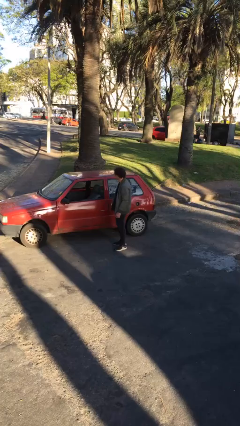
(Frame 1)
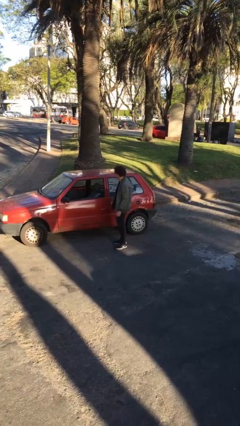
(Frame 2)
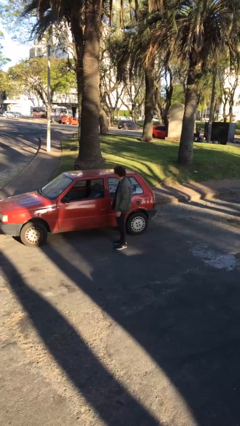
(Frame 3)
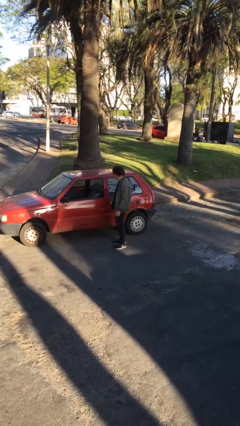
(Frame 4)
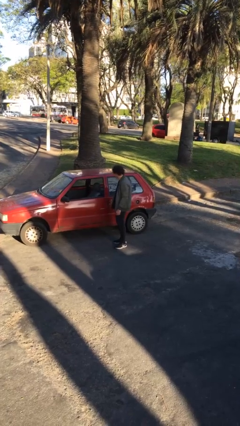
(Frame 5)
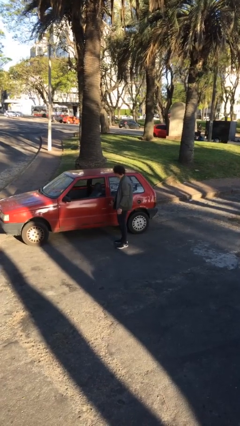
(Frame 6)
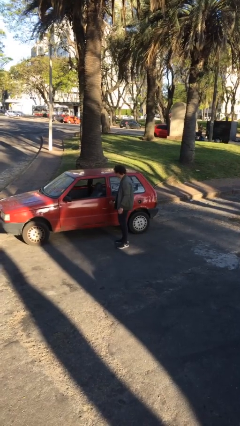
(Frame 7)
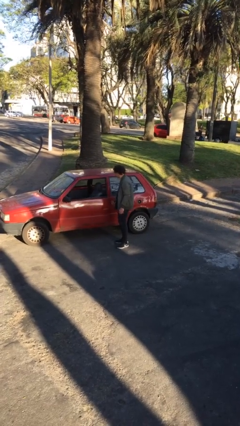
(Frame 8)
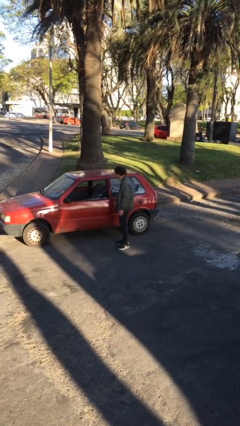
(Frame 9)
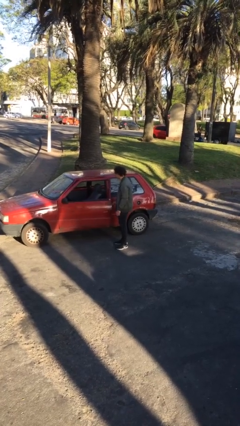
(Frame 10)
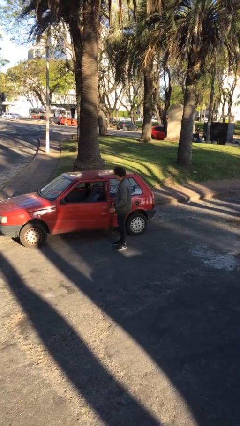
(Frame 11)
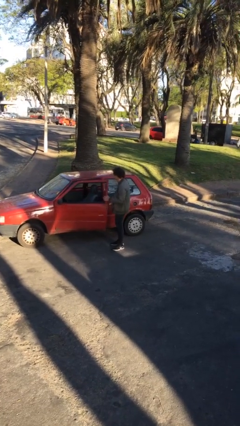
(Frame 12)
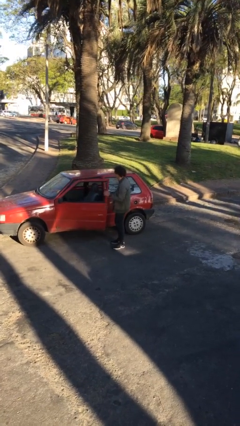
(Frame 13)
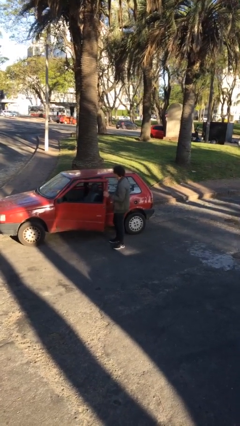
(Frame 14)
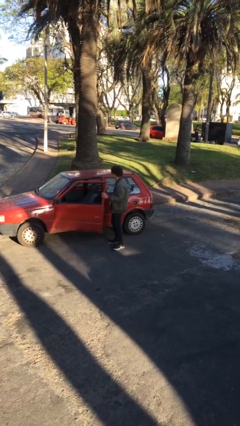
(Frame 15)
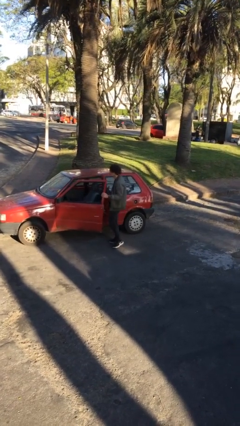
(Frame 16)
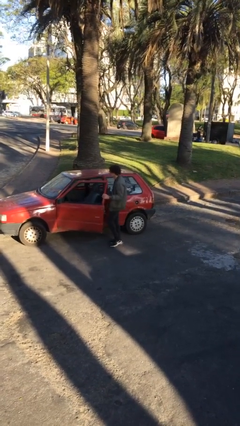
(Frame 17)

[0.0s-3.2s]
person opens car door

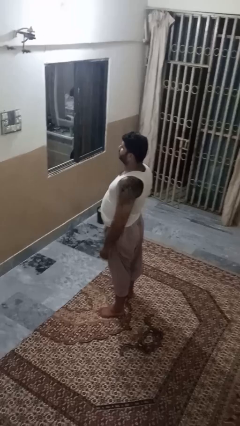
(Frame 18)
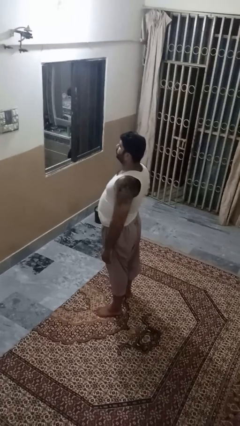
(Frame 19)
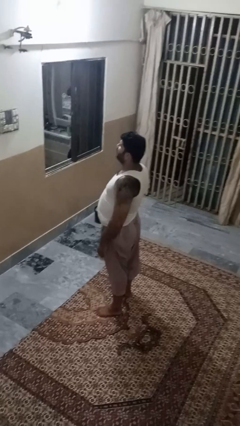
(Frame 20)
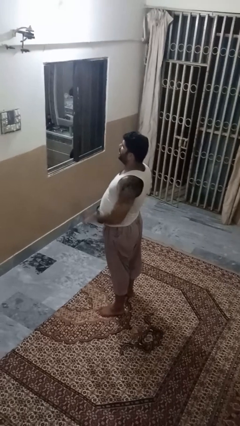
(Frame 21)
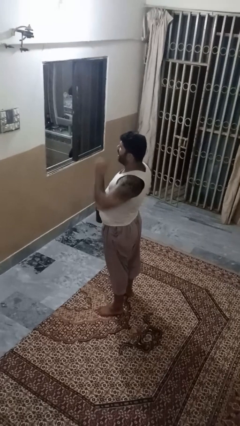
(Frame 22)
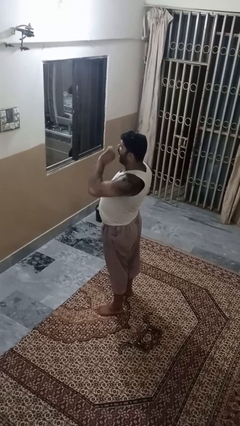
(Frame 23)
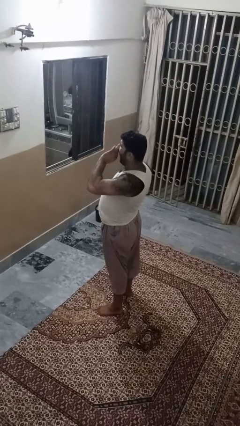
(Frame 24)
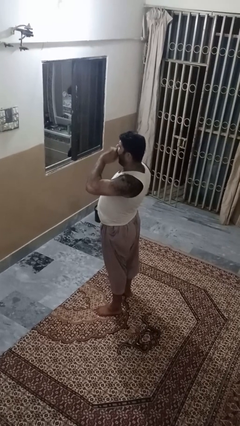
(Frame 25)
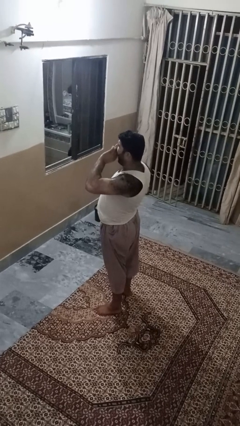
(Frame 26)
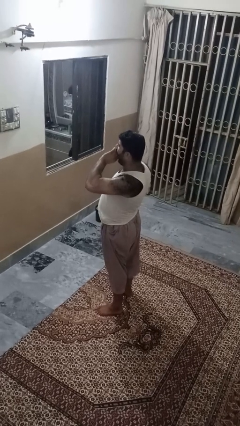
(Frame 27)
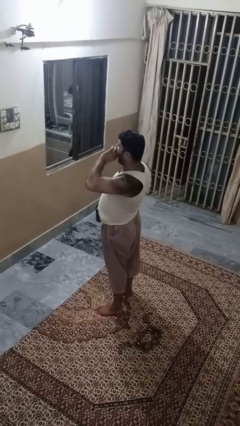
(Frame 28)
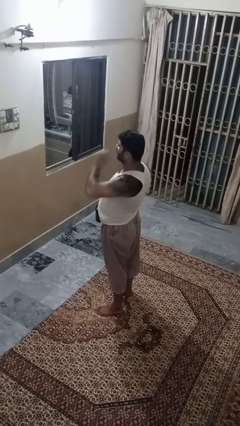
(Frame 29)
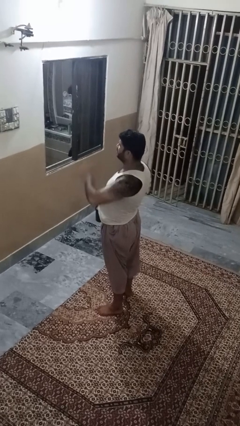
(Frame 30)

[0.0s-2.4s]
person yawns

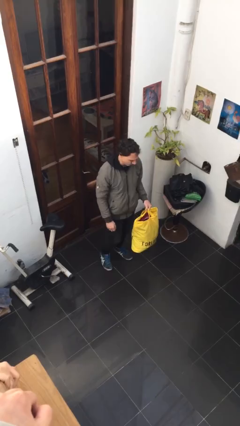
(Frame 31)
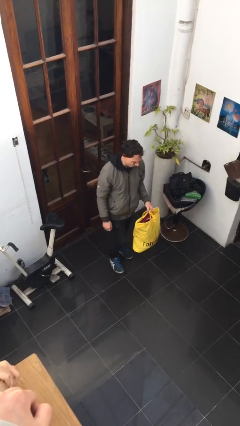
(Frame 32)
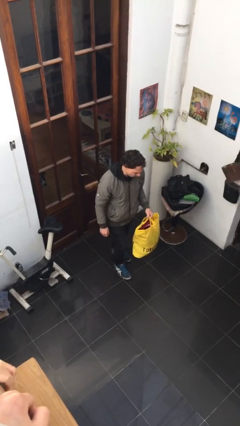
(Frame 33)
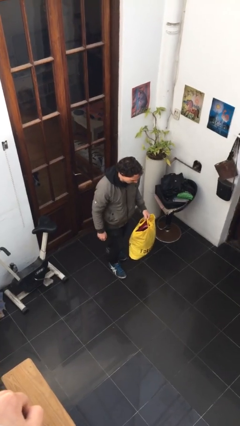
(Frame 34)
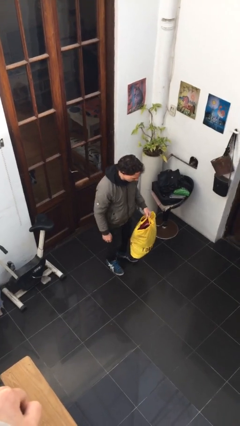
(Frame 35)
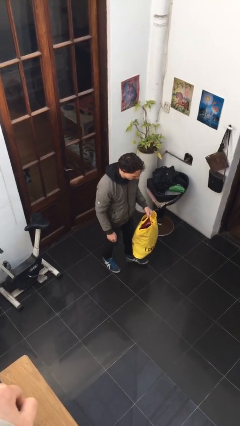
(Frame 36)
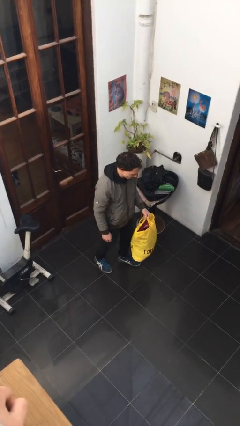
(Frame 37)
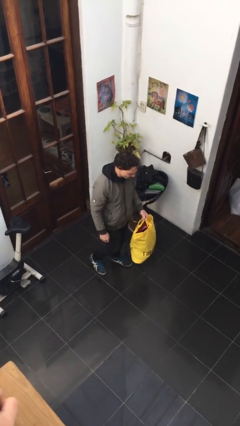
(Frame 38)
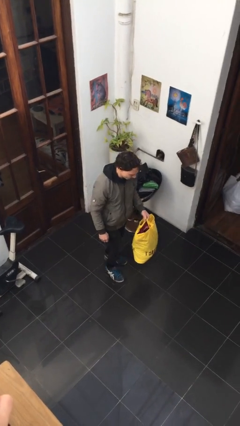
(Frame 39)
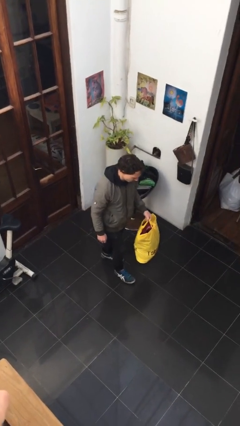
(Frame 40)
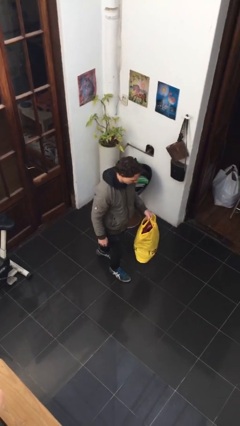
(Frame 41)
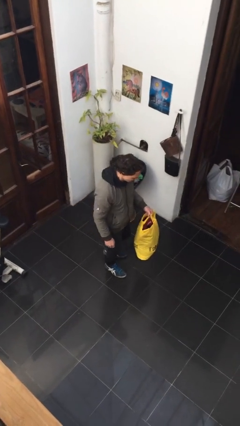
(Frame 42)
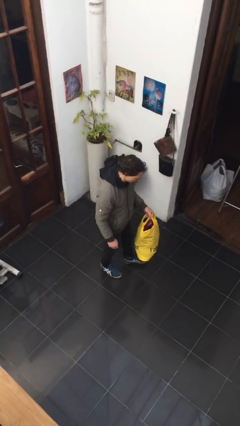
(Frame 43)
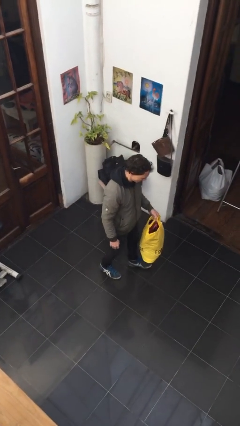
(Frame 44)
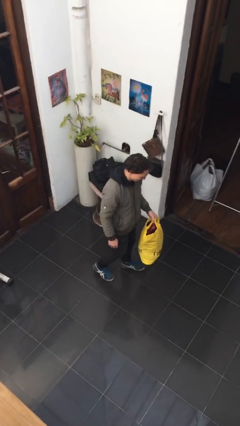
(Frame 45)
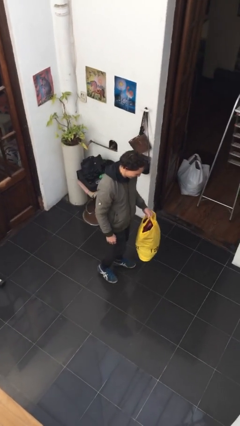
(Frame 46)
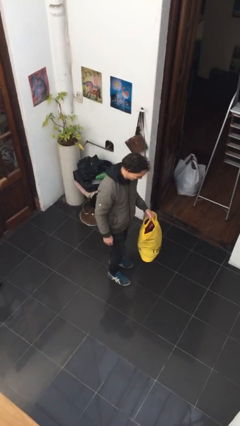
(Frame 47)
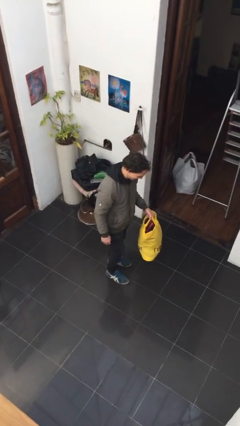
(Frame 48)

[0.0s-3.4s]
person carries heavy object

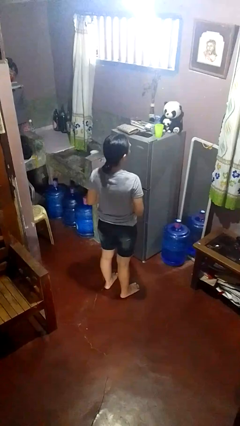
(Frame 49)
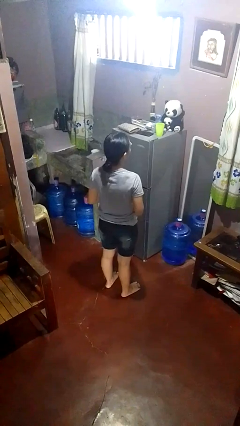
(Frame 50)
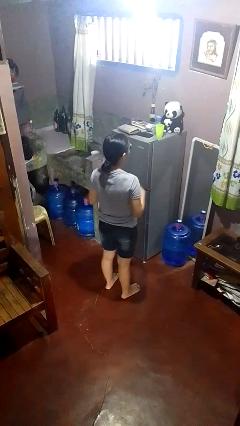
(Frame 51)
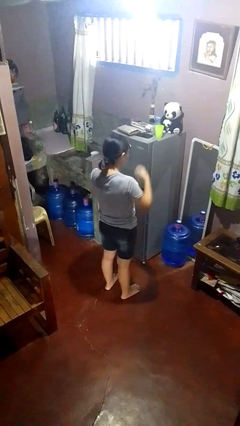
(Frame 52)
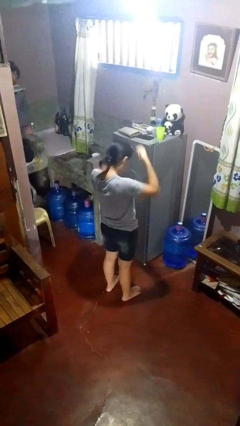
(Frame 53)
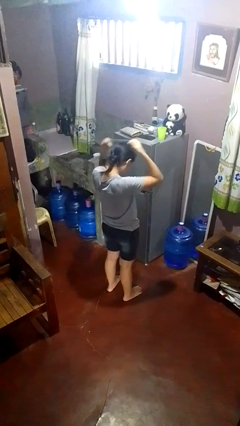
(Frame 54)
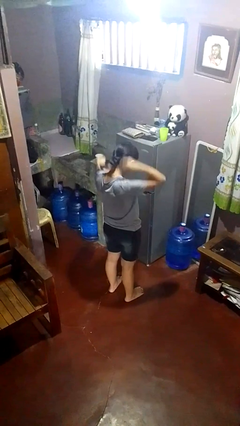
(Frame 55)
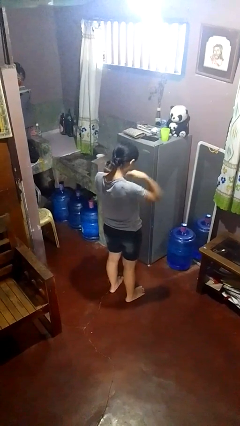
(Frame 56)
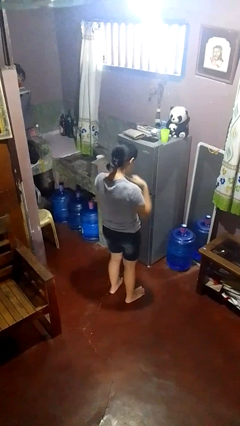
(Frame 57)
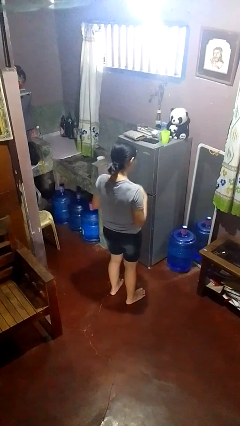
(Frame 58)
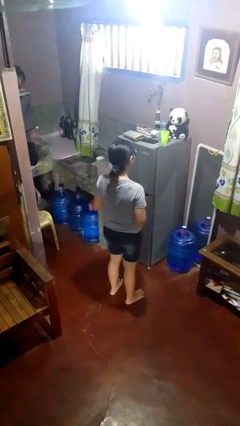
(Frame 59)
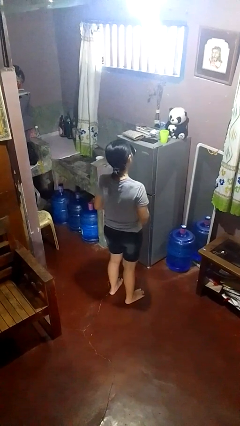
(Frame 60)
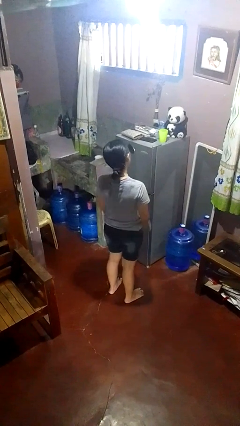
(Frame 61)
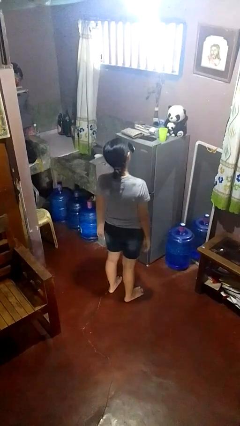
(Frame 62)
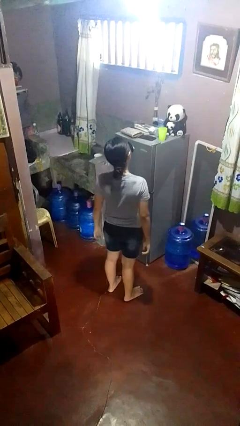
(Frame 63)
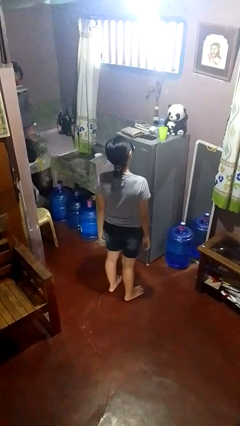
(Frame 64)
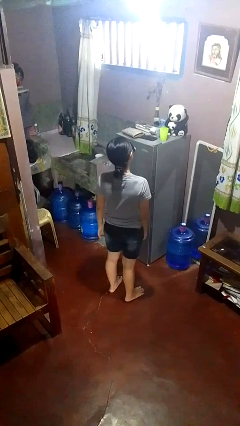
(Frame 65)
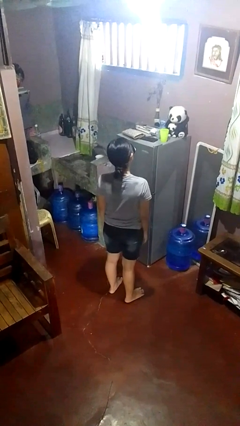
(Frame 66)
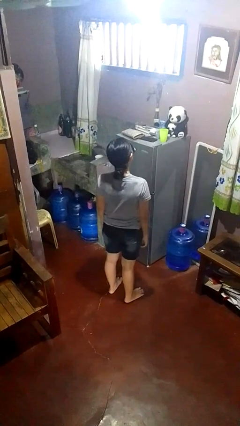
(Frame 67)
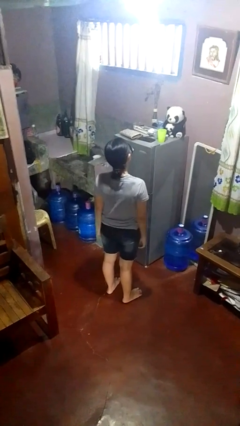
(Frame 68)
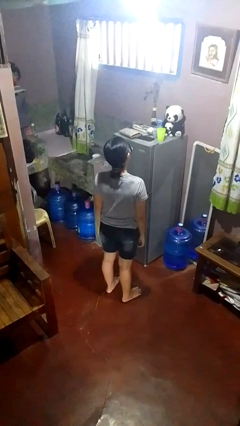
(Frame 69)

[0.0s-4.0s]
person puts on necklace

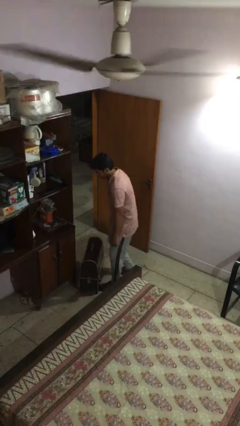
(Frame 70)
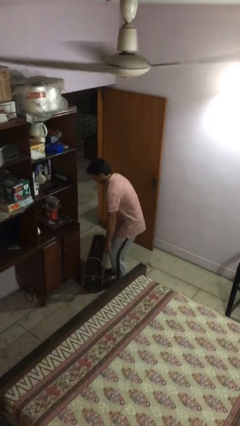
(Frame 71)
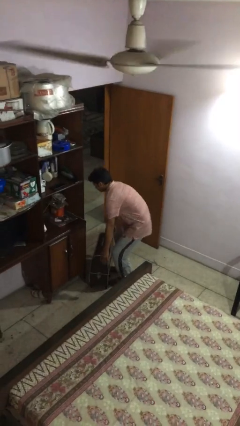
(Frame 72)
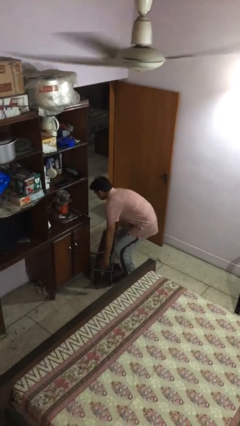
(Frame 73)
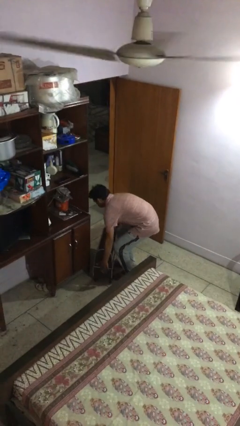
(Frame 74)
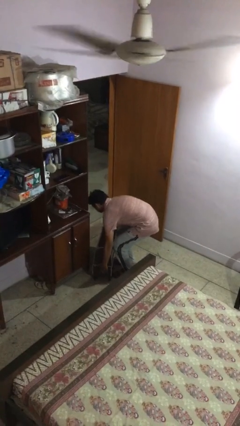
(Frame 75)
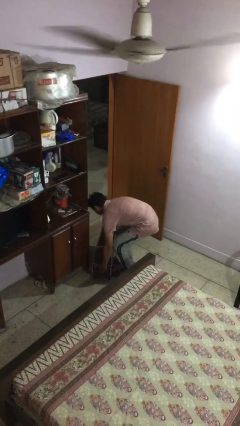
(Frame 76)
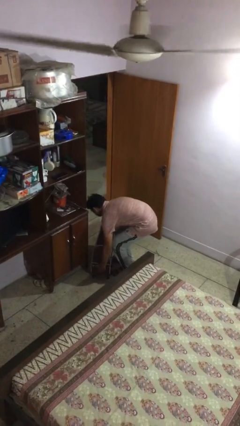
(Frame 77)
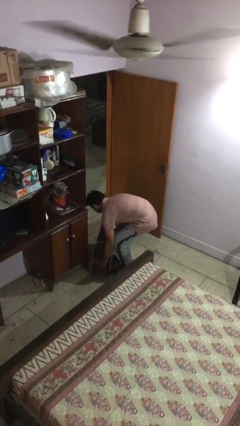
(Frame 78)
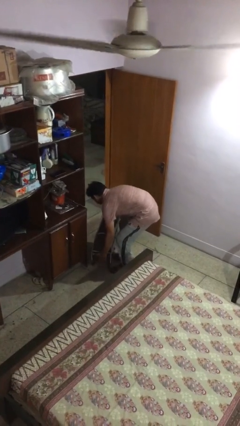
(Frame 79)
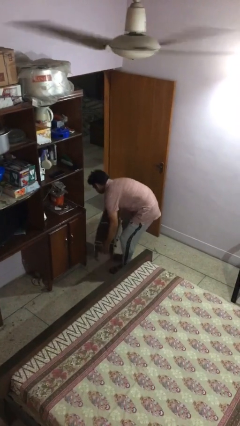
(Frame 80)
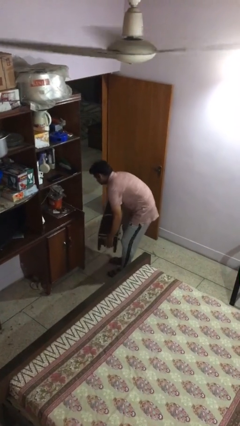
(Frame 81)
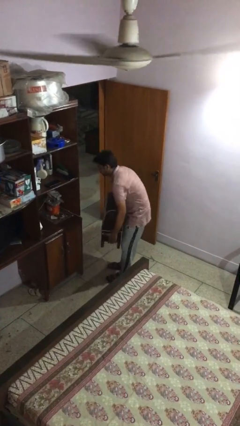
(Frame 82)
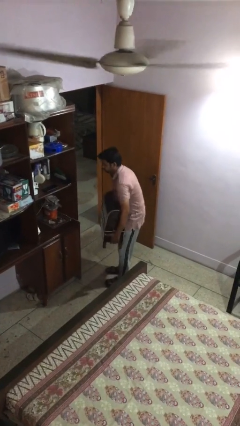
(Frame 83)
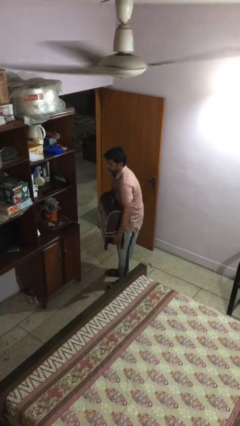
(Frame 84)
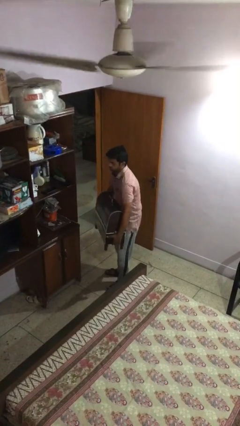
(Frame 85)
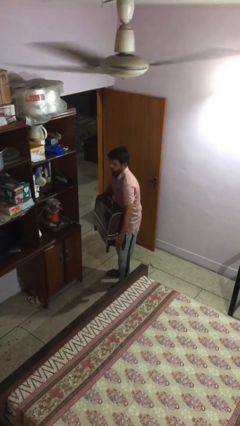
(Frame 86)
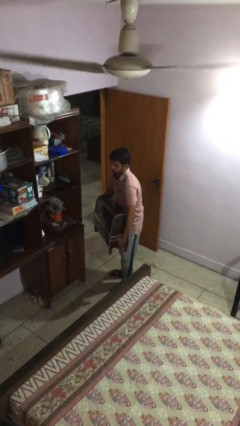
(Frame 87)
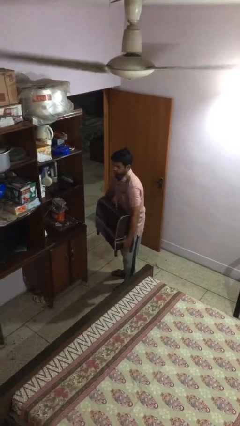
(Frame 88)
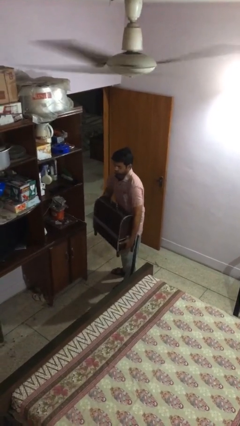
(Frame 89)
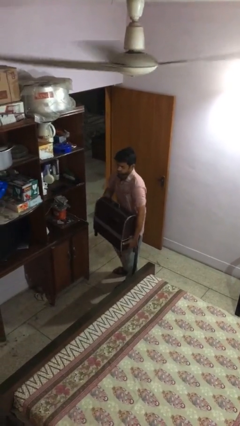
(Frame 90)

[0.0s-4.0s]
person picks up object from floor

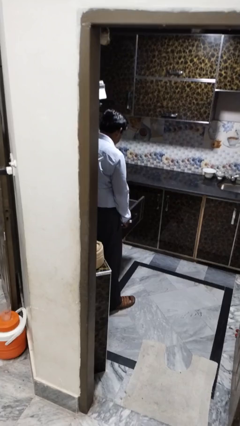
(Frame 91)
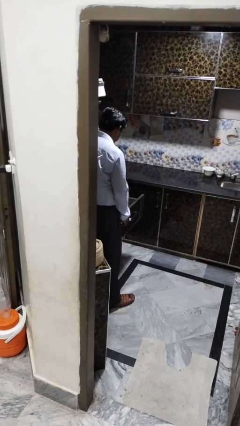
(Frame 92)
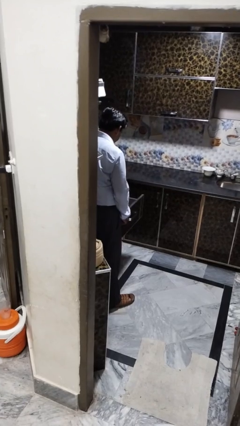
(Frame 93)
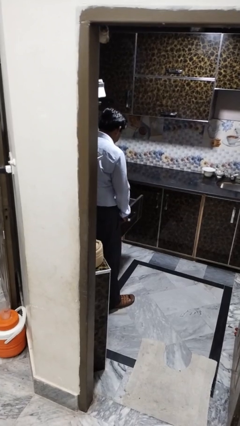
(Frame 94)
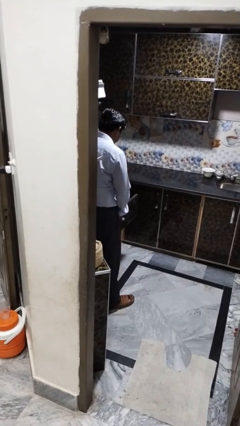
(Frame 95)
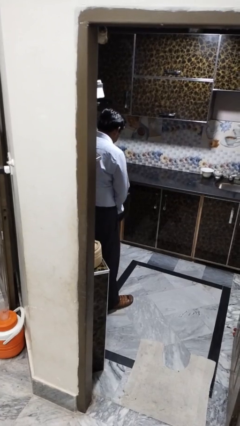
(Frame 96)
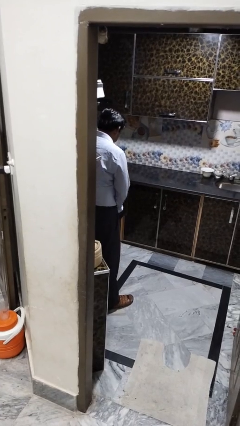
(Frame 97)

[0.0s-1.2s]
person closes kitchen drawer
